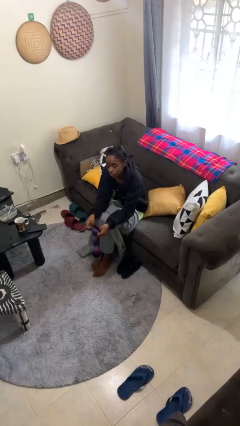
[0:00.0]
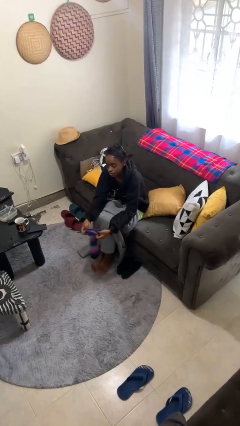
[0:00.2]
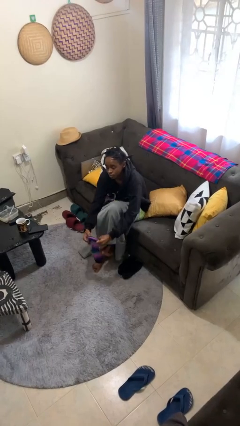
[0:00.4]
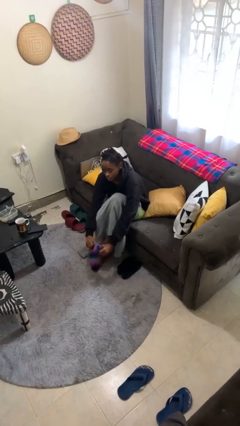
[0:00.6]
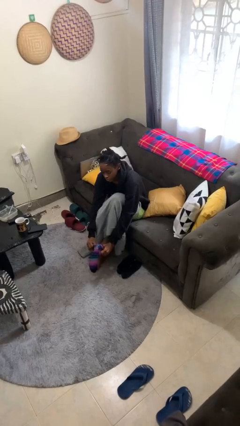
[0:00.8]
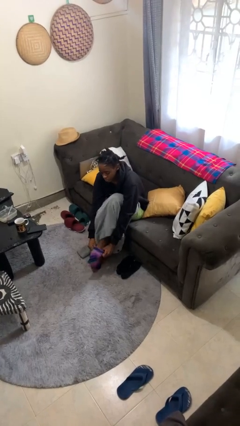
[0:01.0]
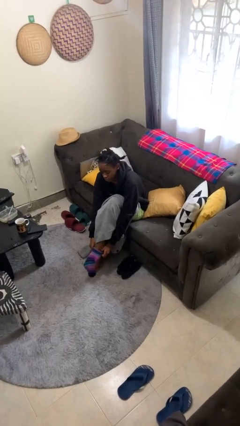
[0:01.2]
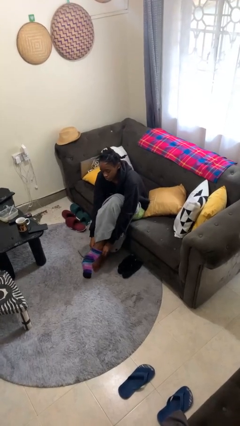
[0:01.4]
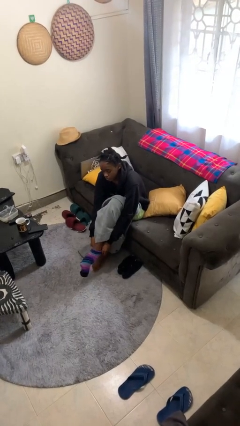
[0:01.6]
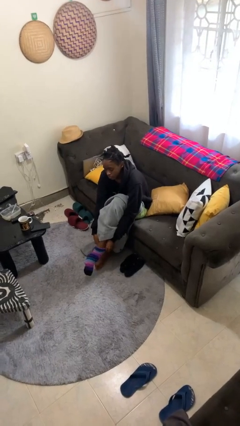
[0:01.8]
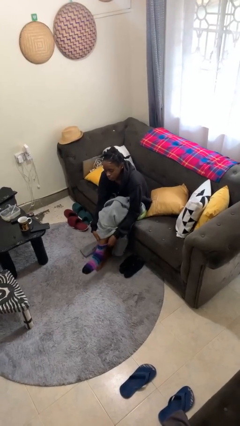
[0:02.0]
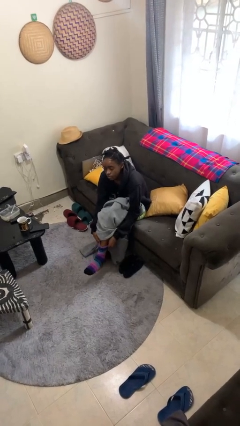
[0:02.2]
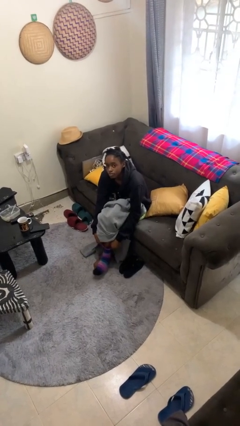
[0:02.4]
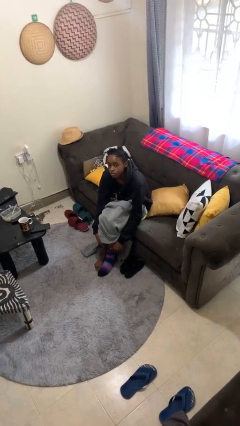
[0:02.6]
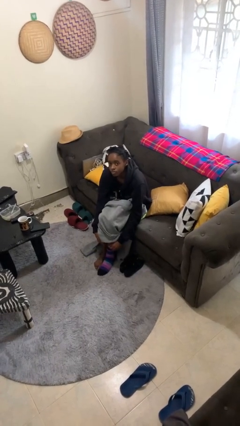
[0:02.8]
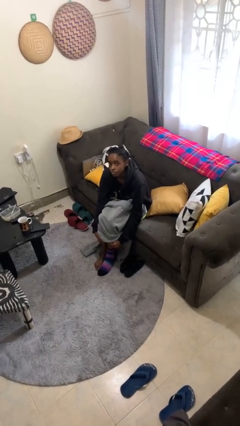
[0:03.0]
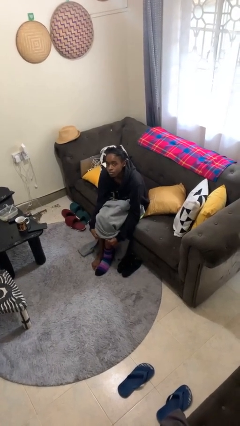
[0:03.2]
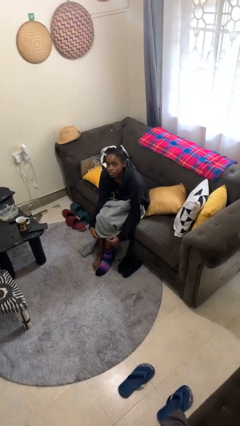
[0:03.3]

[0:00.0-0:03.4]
person puts on socks

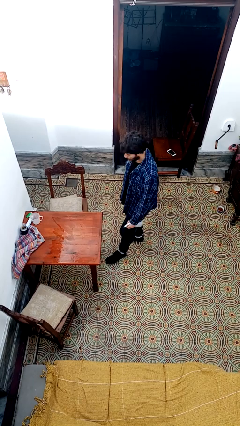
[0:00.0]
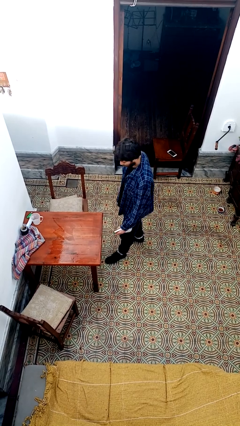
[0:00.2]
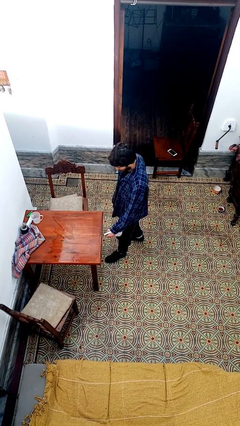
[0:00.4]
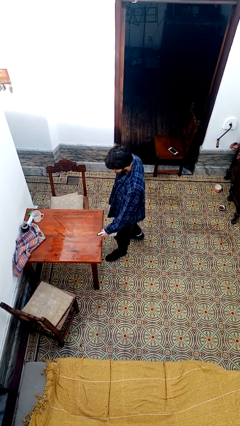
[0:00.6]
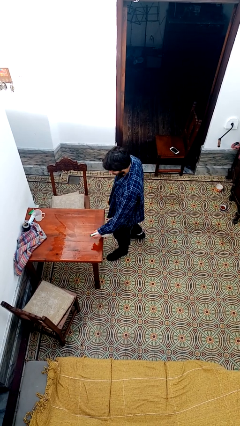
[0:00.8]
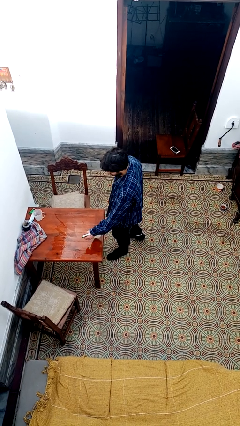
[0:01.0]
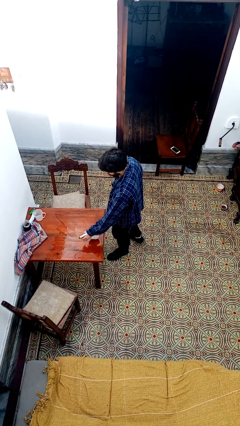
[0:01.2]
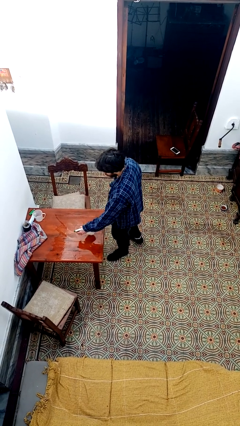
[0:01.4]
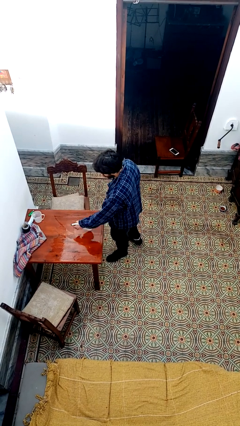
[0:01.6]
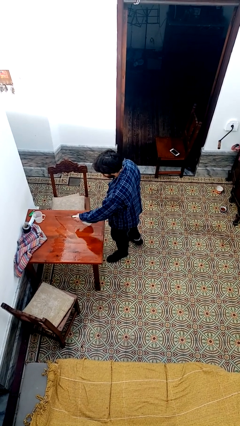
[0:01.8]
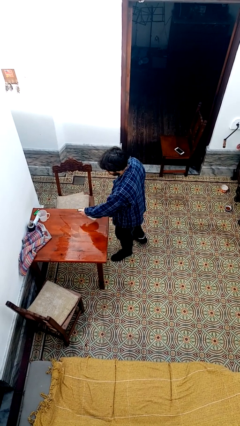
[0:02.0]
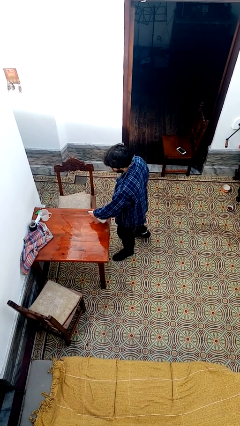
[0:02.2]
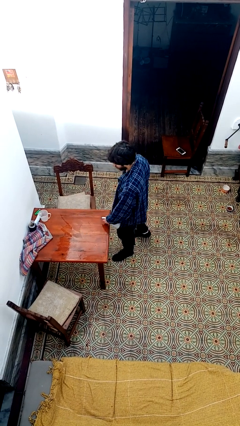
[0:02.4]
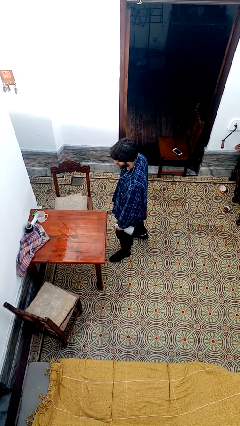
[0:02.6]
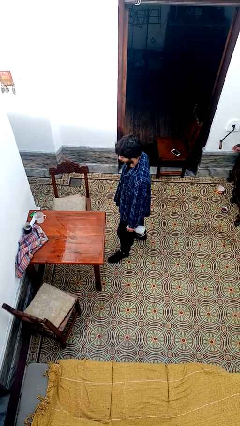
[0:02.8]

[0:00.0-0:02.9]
person sprays from bottle

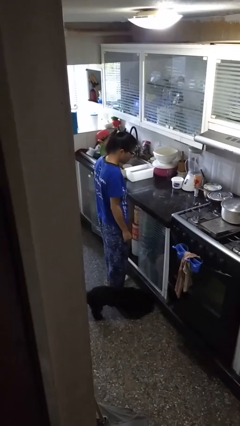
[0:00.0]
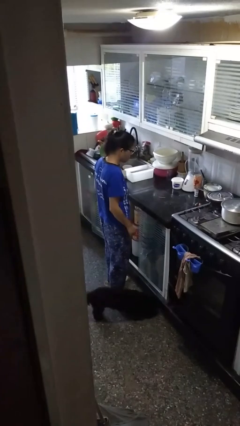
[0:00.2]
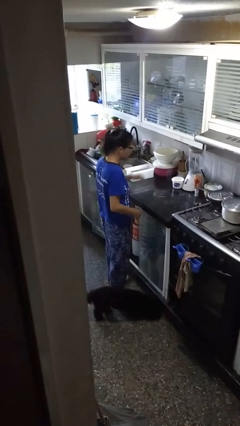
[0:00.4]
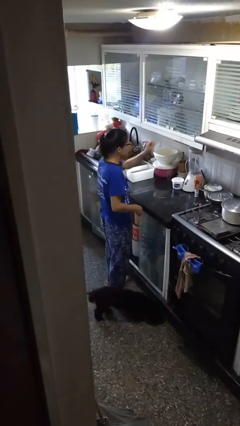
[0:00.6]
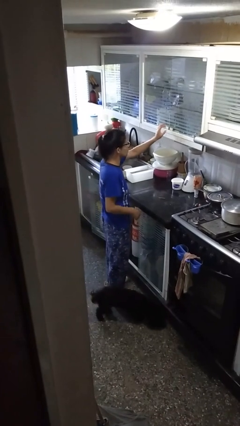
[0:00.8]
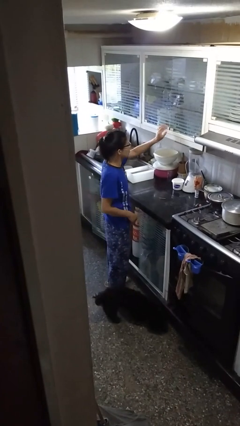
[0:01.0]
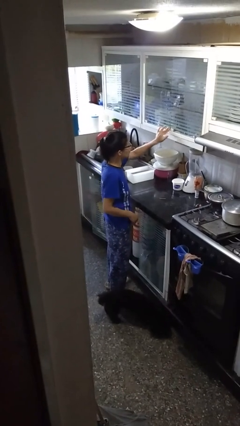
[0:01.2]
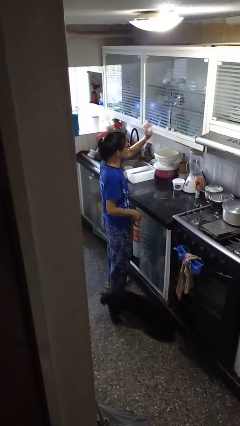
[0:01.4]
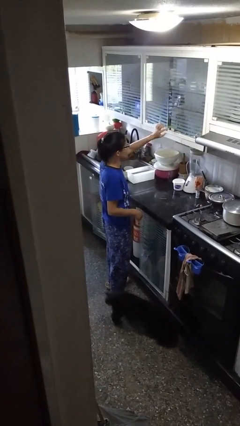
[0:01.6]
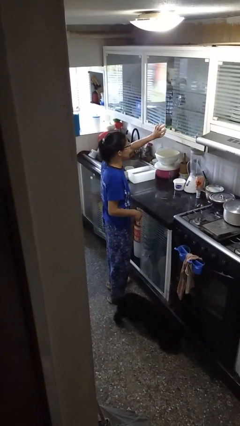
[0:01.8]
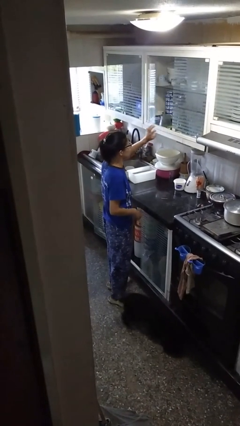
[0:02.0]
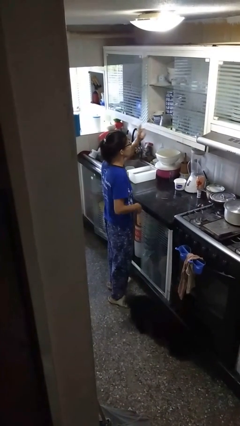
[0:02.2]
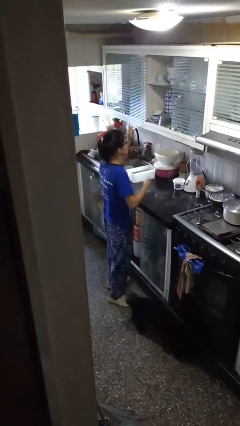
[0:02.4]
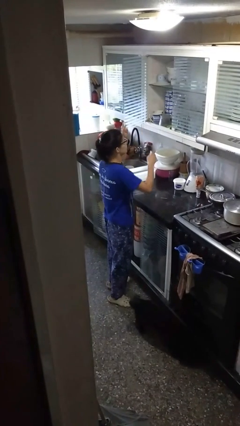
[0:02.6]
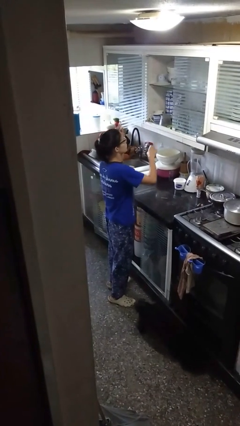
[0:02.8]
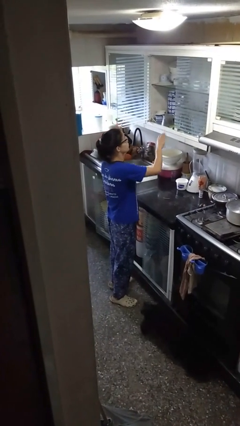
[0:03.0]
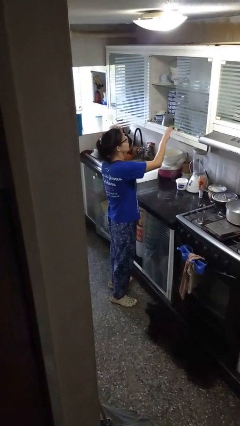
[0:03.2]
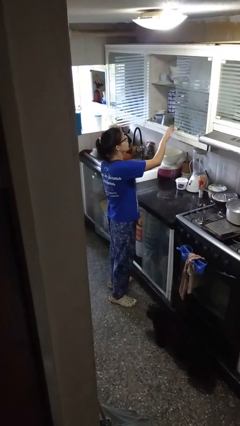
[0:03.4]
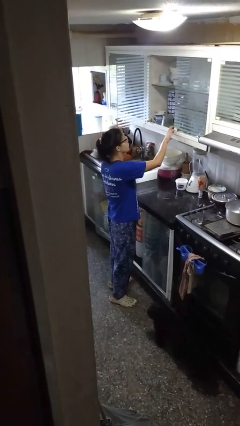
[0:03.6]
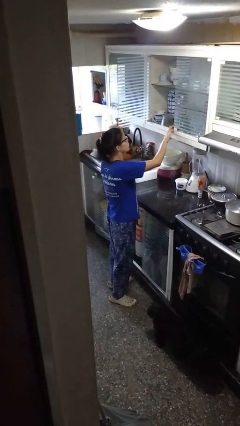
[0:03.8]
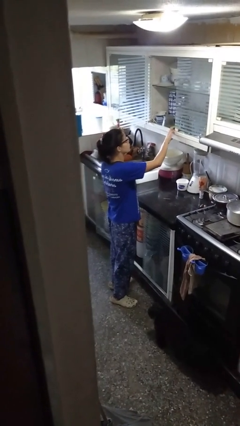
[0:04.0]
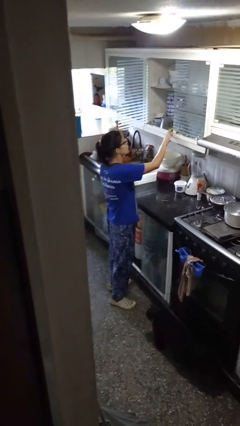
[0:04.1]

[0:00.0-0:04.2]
person opens cabinet

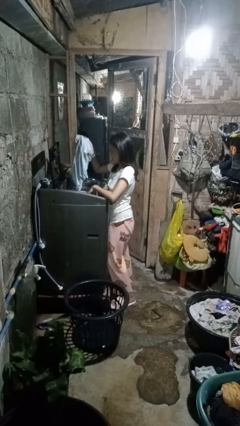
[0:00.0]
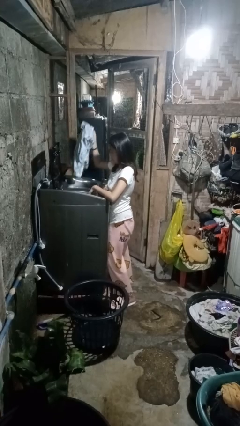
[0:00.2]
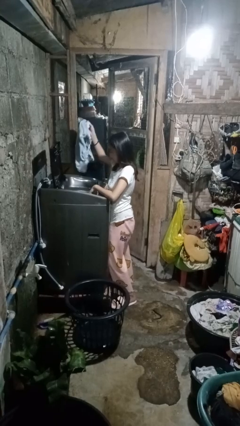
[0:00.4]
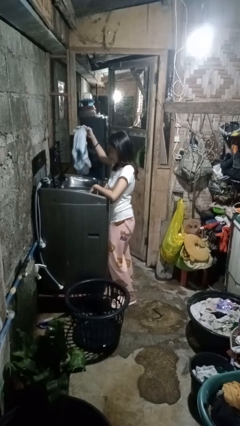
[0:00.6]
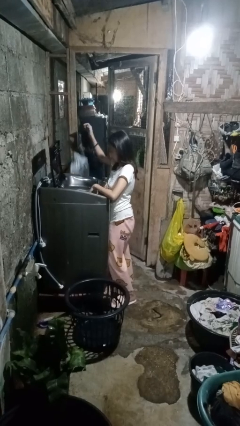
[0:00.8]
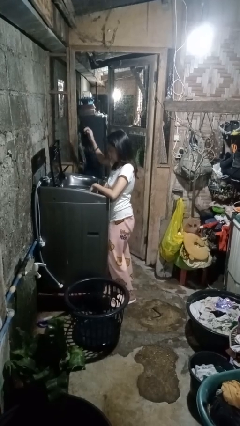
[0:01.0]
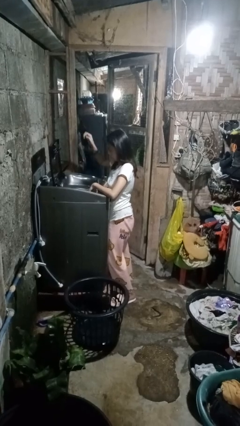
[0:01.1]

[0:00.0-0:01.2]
person loads dryer

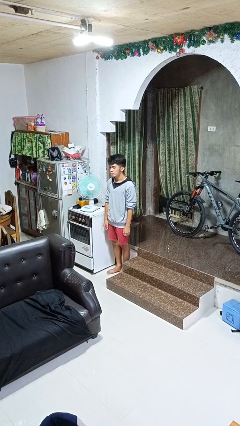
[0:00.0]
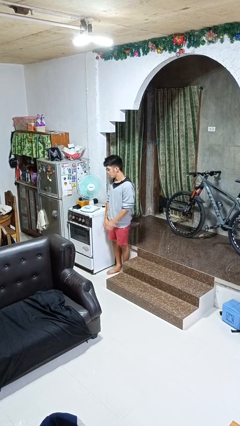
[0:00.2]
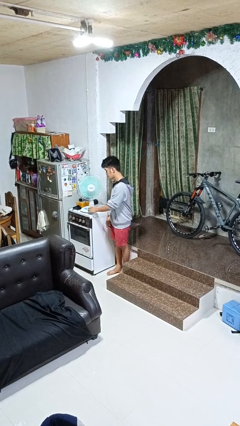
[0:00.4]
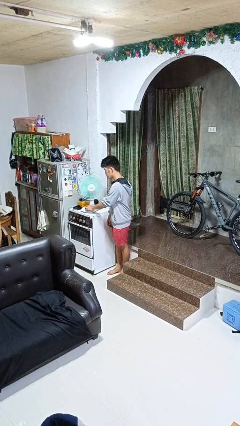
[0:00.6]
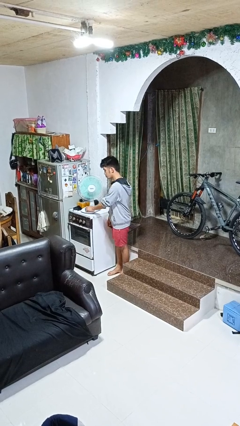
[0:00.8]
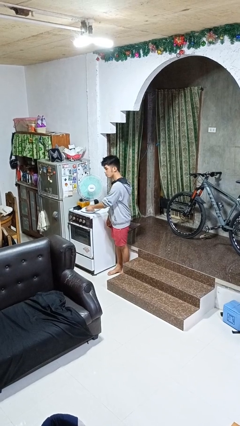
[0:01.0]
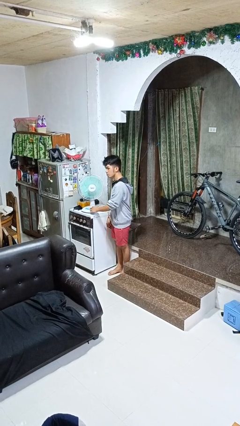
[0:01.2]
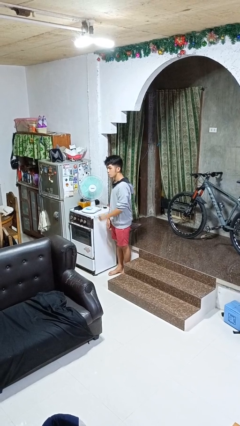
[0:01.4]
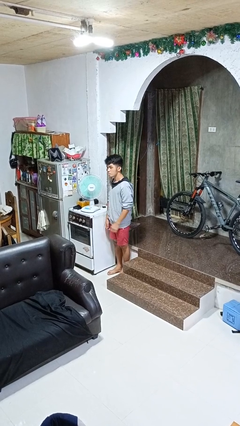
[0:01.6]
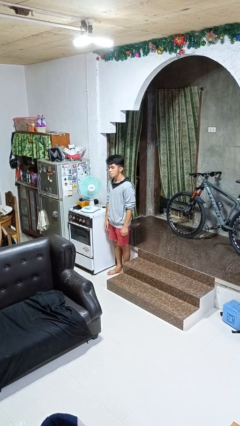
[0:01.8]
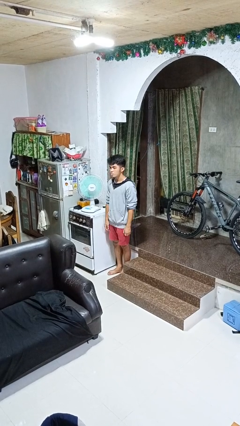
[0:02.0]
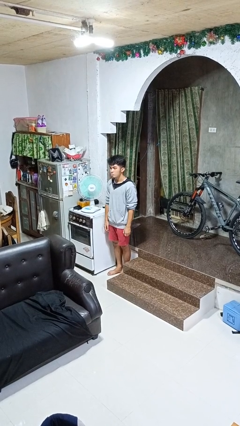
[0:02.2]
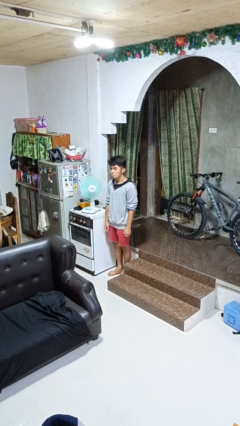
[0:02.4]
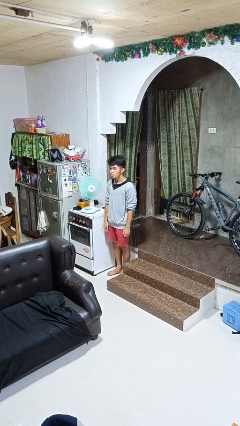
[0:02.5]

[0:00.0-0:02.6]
person turns on fan

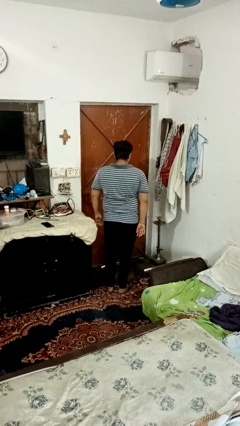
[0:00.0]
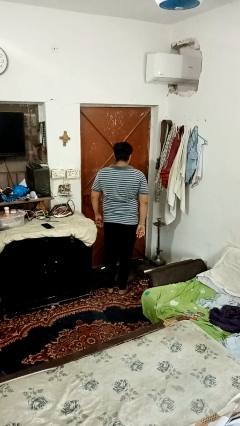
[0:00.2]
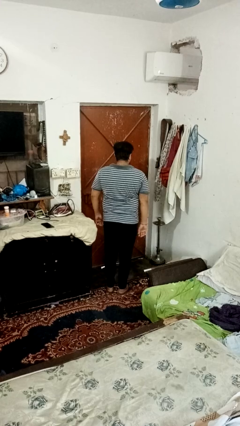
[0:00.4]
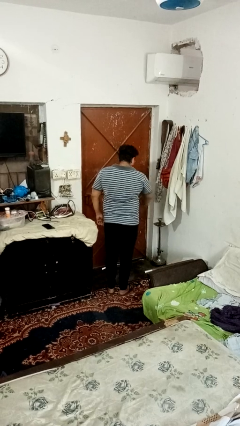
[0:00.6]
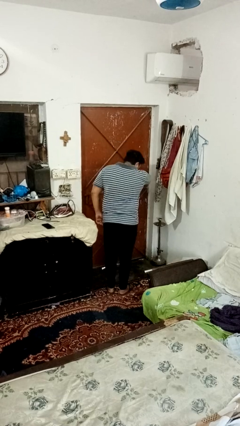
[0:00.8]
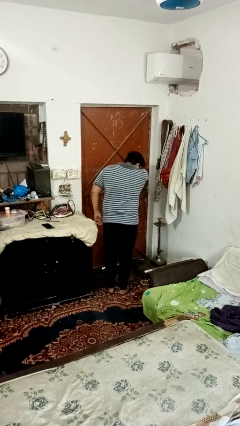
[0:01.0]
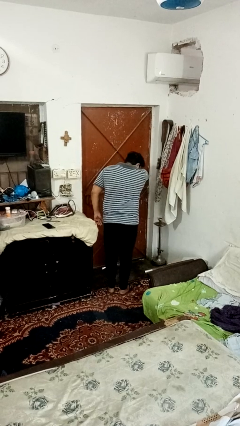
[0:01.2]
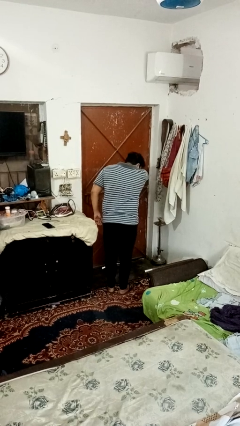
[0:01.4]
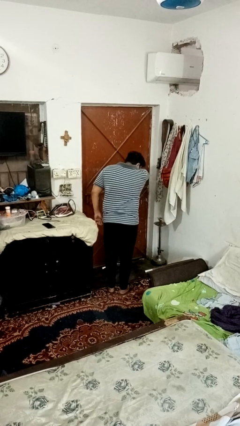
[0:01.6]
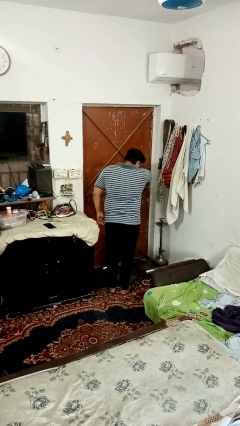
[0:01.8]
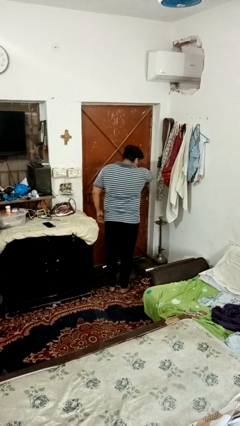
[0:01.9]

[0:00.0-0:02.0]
person sneezes into arm

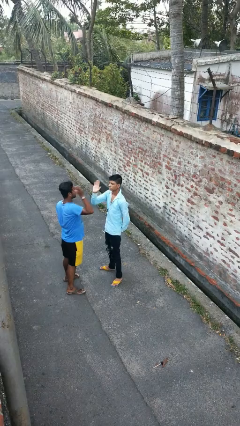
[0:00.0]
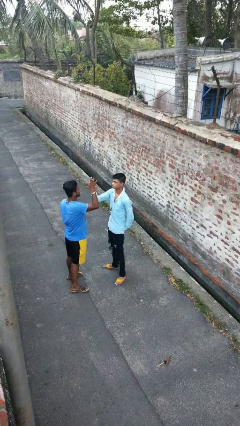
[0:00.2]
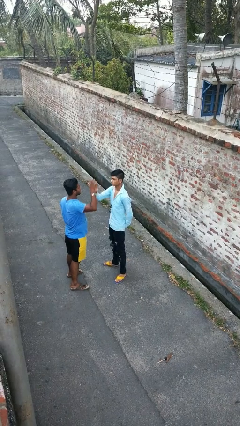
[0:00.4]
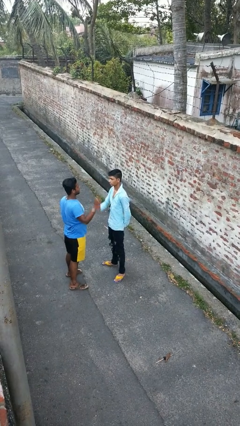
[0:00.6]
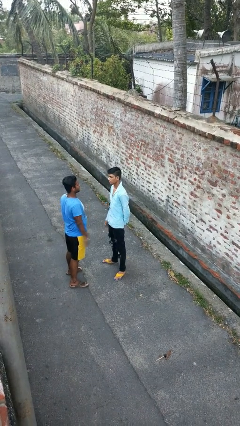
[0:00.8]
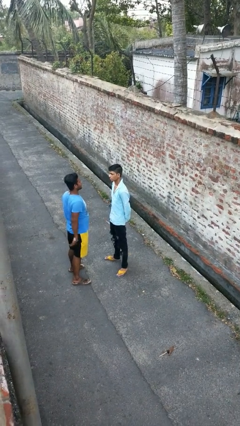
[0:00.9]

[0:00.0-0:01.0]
person highfives hand
